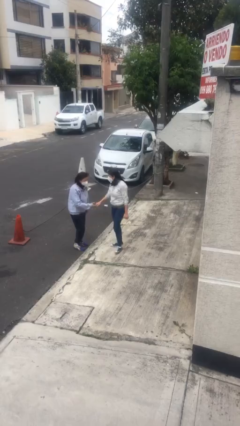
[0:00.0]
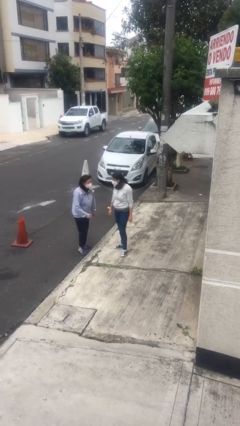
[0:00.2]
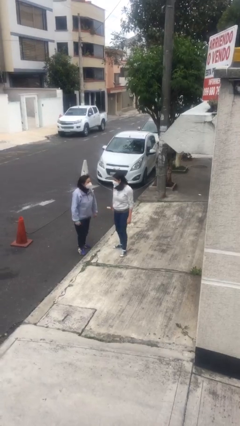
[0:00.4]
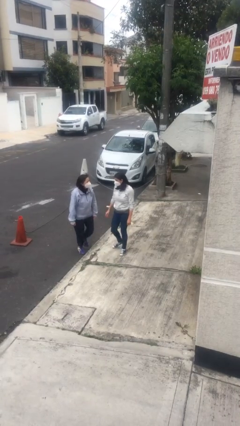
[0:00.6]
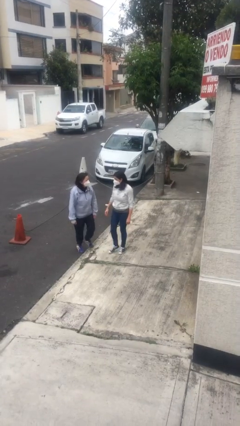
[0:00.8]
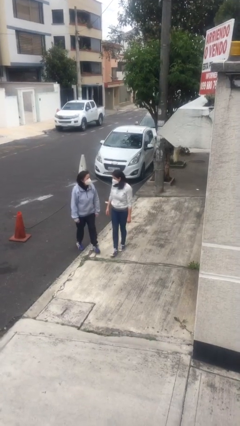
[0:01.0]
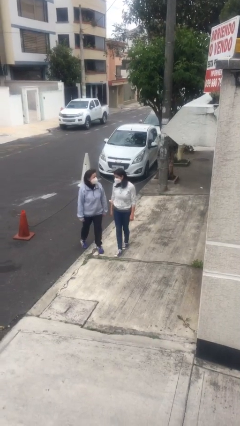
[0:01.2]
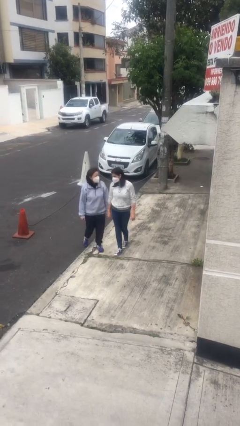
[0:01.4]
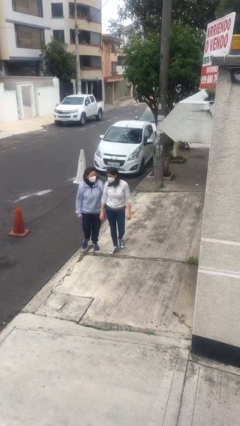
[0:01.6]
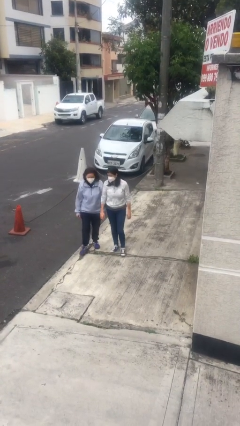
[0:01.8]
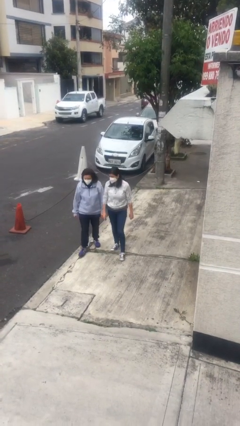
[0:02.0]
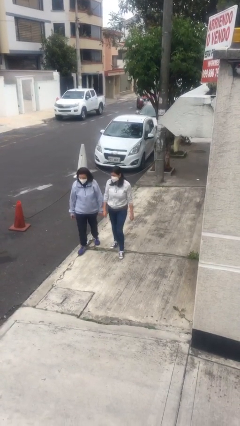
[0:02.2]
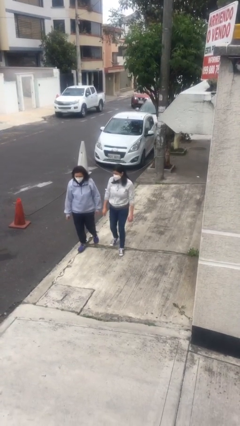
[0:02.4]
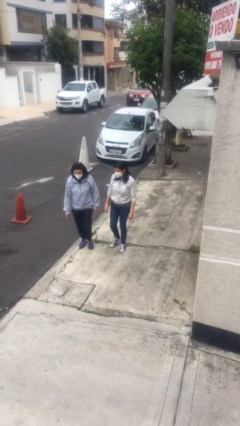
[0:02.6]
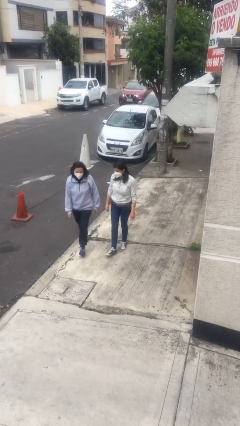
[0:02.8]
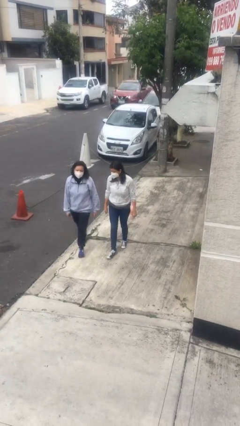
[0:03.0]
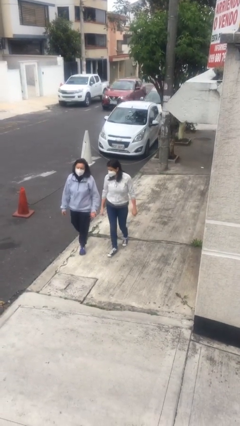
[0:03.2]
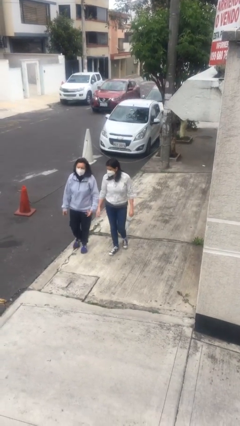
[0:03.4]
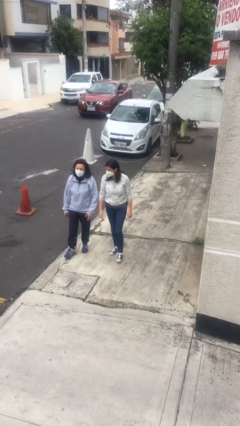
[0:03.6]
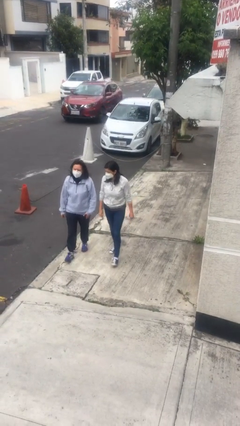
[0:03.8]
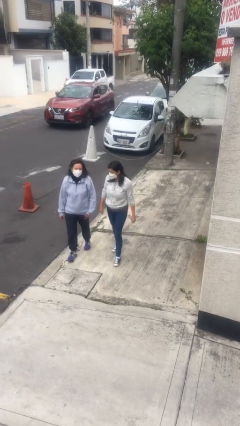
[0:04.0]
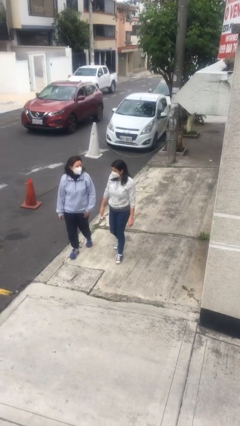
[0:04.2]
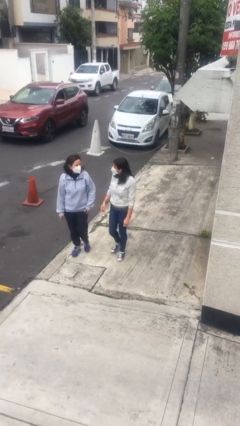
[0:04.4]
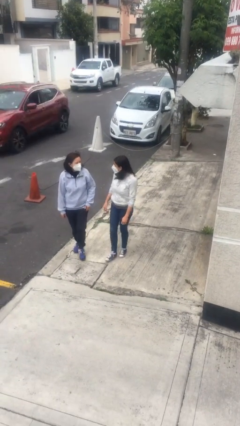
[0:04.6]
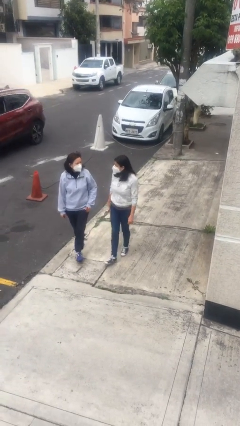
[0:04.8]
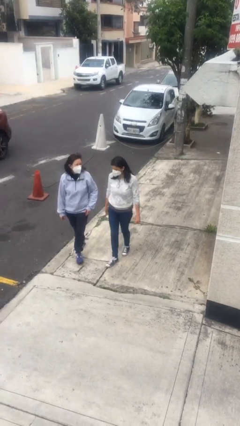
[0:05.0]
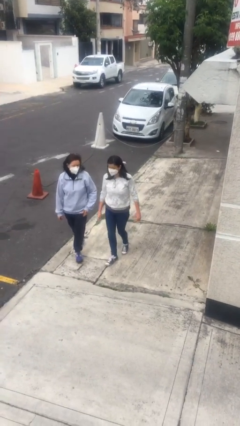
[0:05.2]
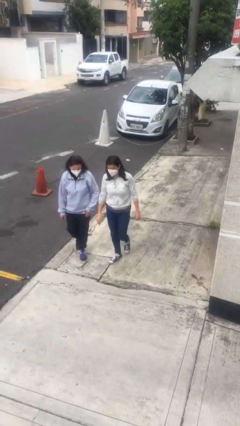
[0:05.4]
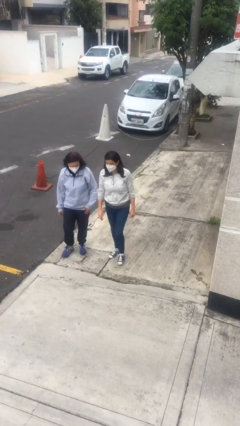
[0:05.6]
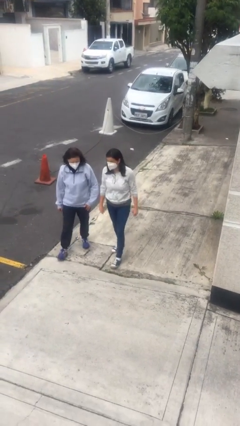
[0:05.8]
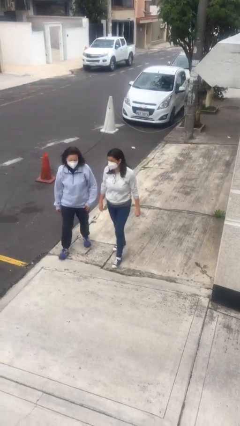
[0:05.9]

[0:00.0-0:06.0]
person talks to person

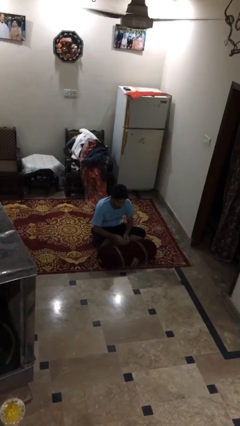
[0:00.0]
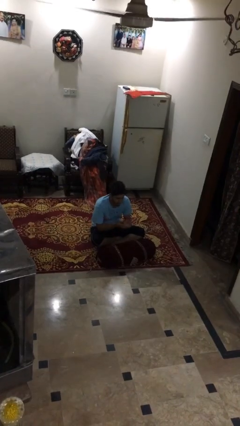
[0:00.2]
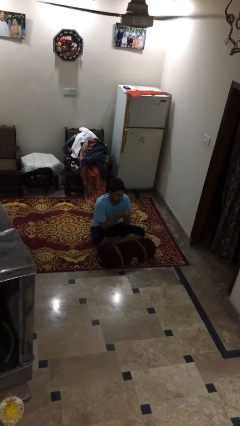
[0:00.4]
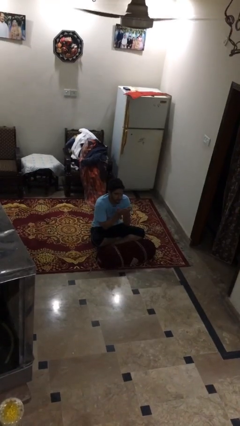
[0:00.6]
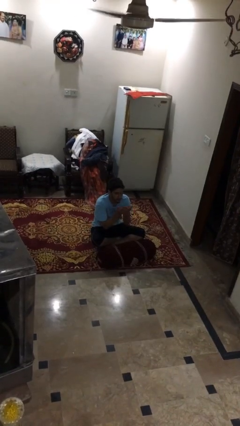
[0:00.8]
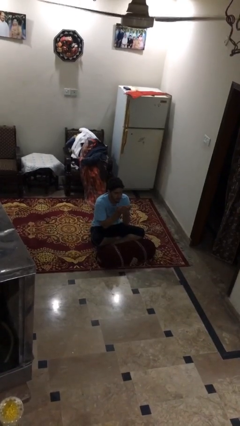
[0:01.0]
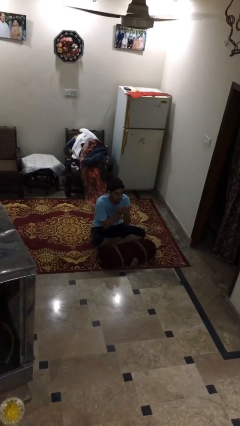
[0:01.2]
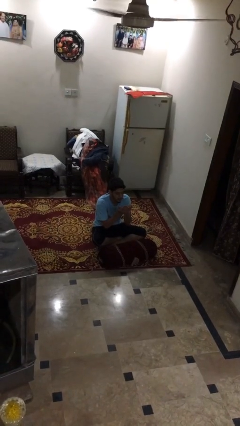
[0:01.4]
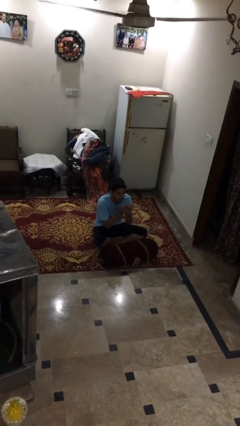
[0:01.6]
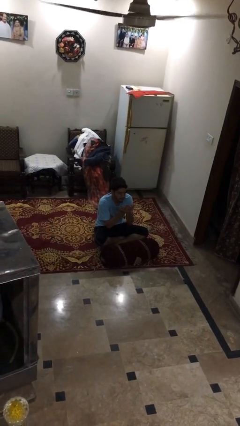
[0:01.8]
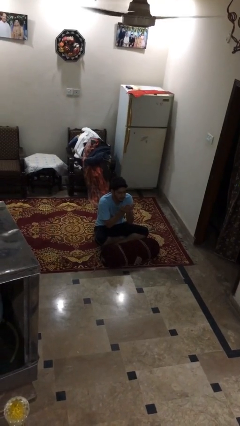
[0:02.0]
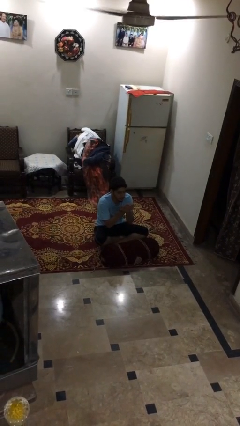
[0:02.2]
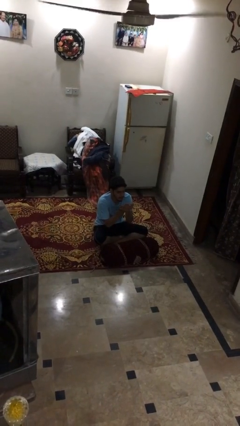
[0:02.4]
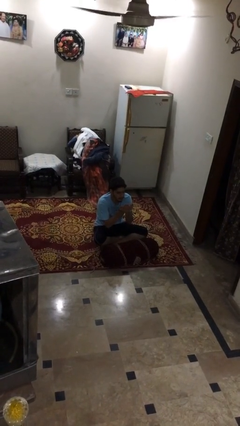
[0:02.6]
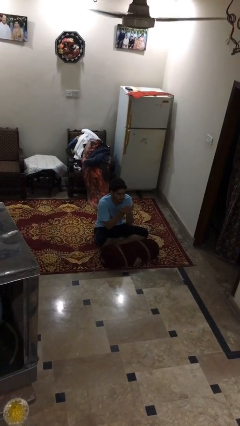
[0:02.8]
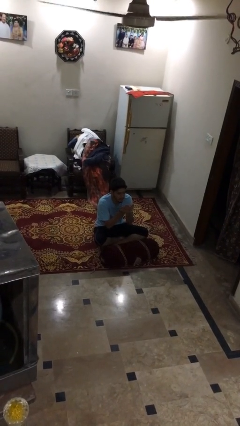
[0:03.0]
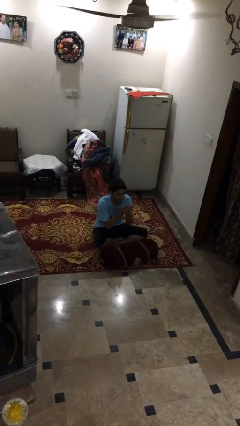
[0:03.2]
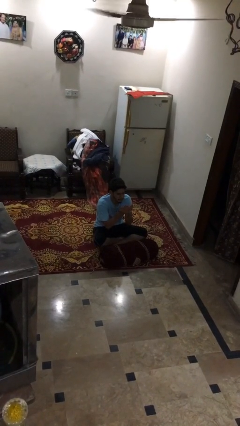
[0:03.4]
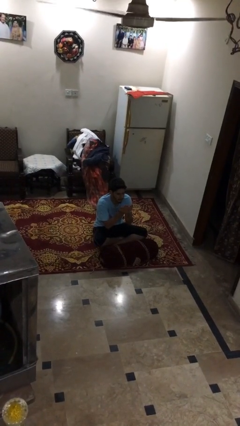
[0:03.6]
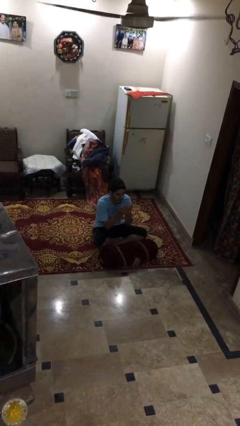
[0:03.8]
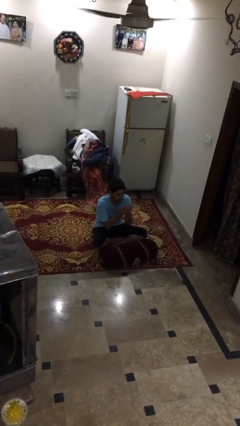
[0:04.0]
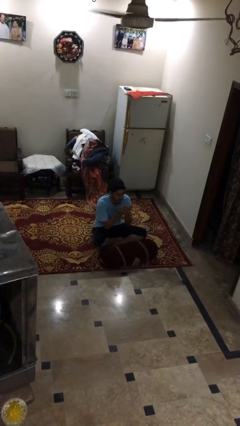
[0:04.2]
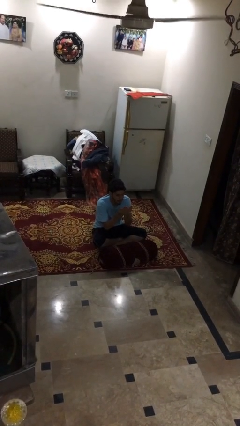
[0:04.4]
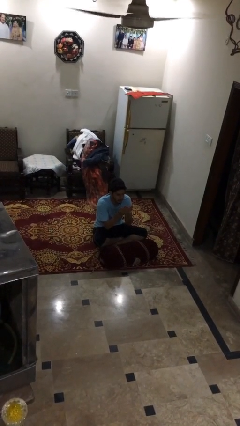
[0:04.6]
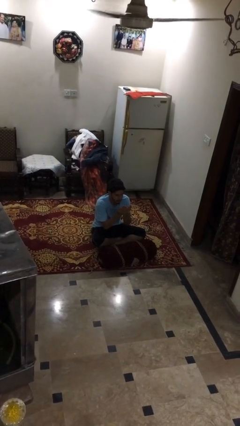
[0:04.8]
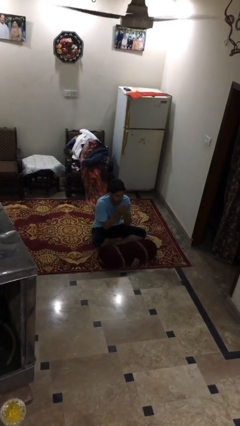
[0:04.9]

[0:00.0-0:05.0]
person prays

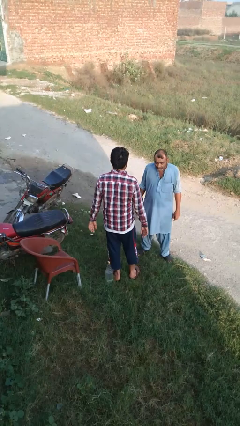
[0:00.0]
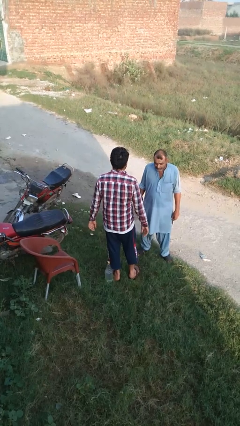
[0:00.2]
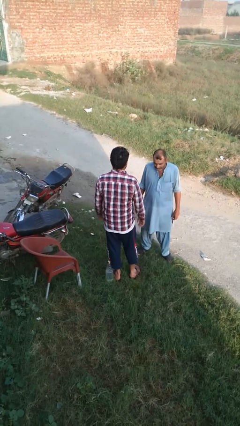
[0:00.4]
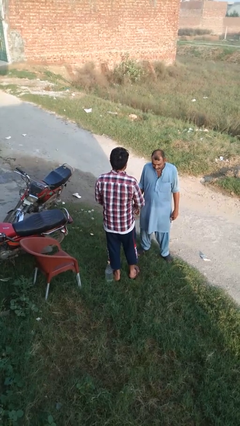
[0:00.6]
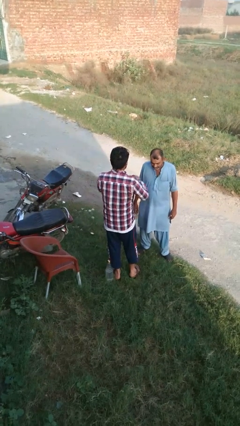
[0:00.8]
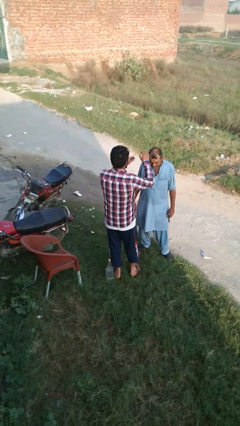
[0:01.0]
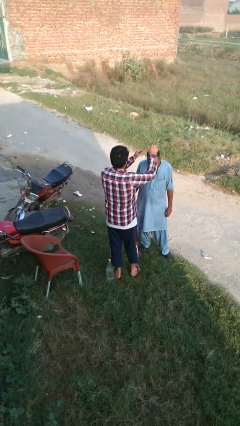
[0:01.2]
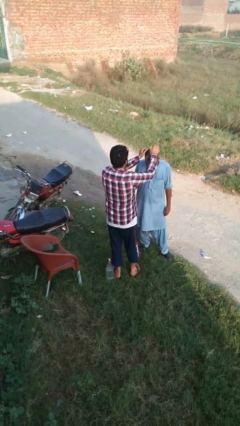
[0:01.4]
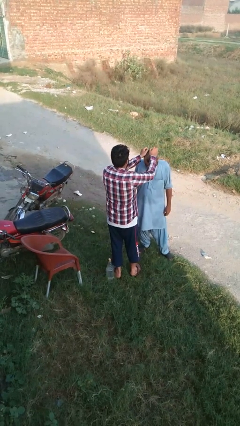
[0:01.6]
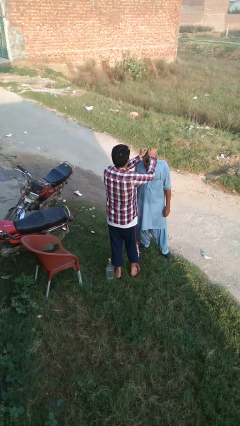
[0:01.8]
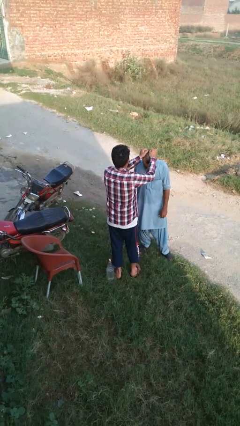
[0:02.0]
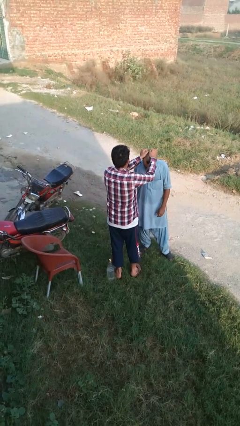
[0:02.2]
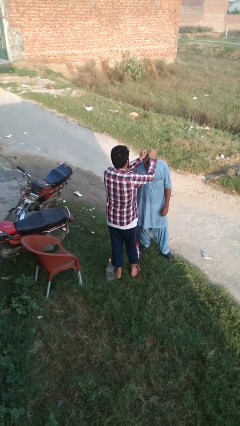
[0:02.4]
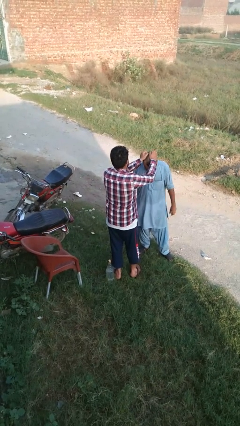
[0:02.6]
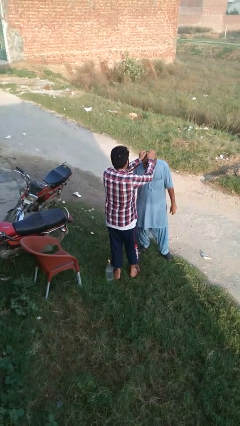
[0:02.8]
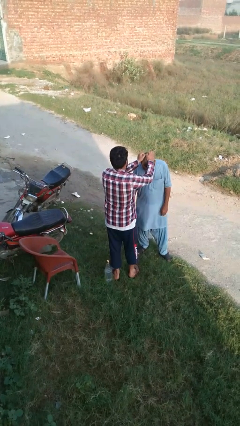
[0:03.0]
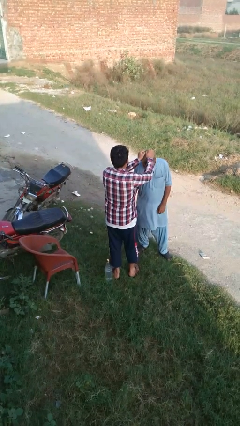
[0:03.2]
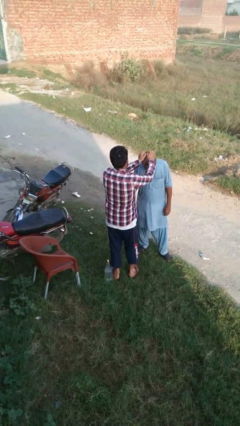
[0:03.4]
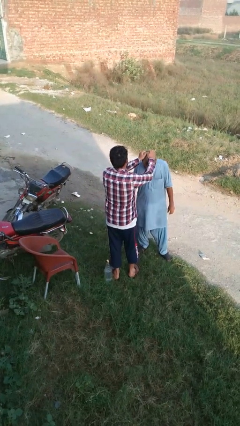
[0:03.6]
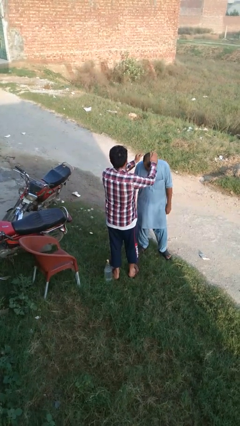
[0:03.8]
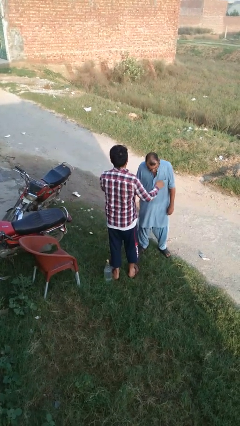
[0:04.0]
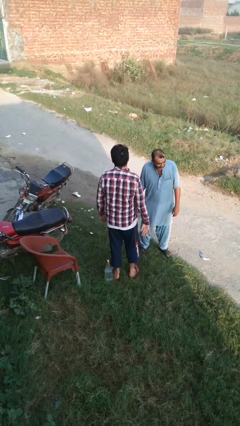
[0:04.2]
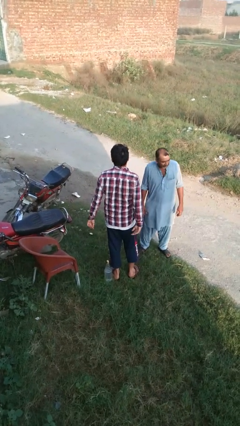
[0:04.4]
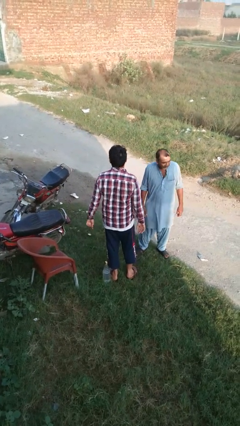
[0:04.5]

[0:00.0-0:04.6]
person grabs person by hair

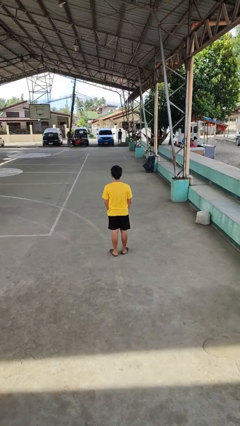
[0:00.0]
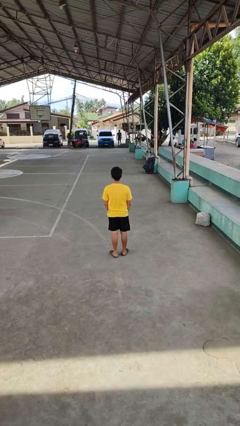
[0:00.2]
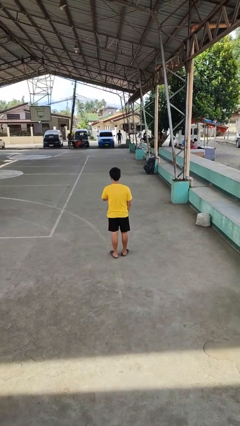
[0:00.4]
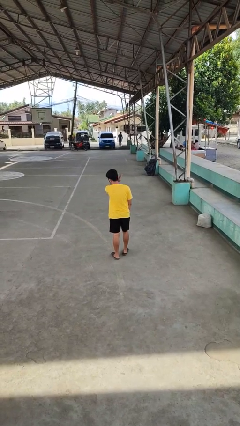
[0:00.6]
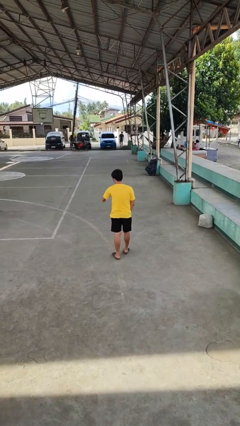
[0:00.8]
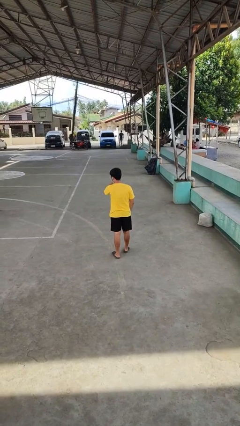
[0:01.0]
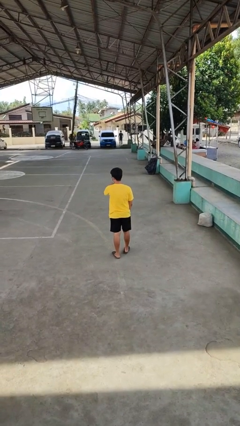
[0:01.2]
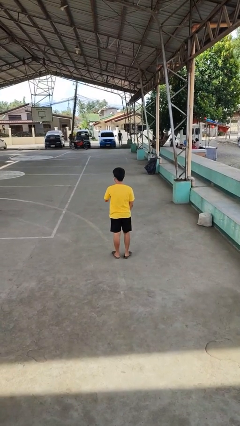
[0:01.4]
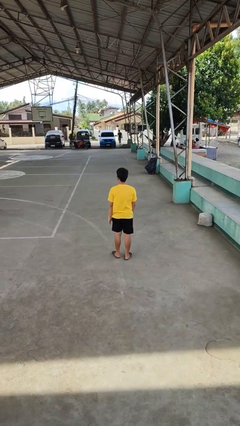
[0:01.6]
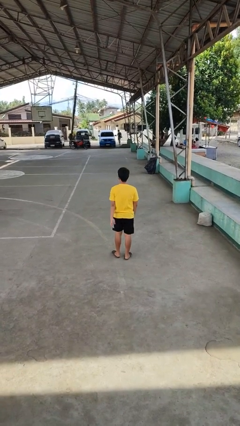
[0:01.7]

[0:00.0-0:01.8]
person karate chop

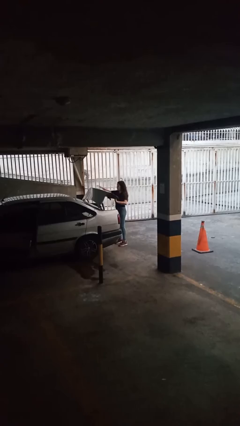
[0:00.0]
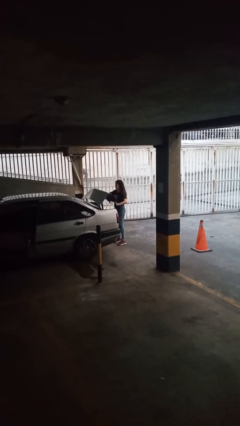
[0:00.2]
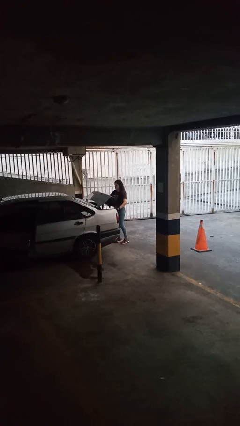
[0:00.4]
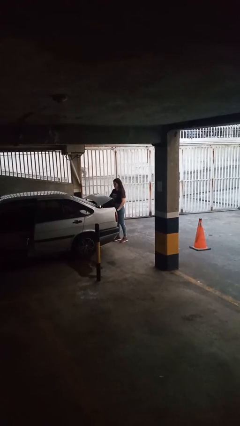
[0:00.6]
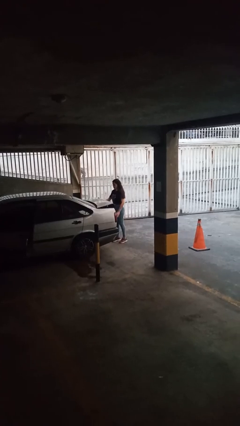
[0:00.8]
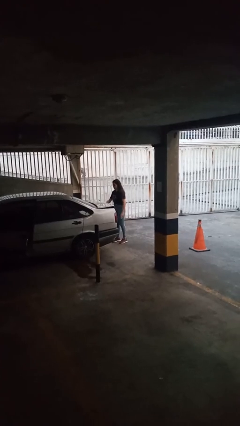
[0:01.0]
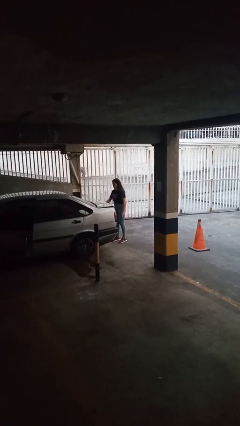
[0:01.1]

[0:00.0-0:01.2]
person closes car trunk
